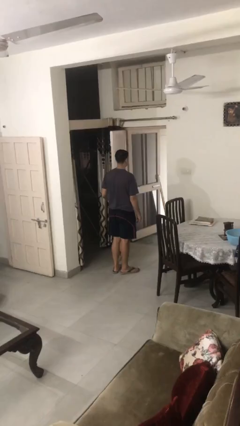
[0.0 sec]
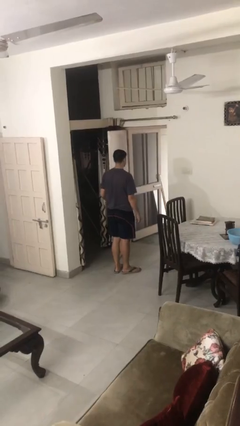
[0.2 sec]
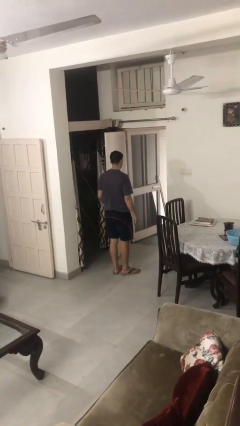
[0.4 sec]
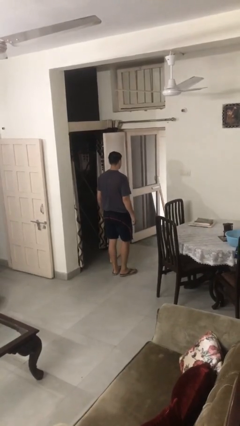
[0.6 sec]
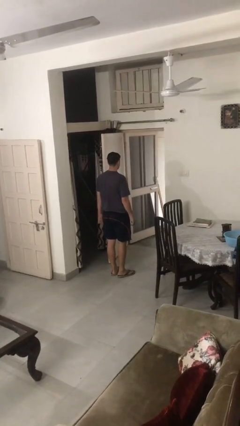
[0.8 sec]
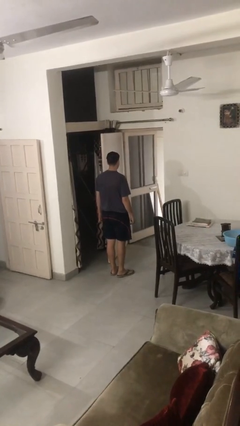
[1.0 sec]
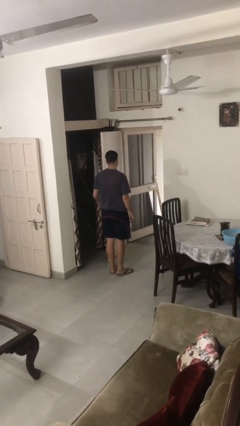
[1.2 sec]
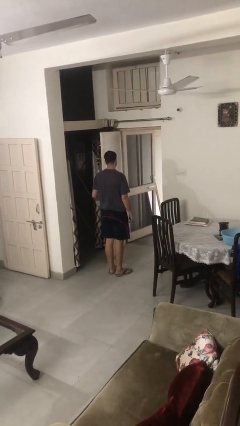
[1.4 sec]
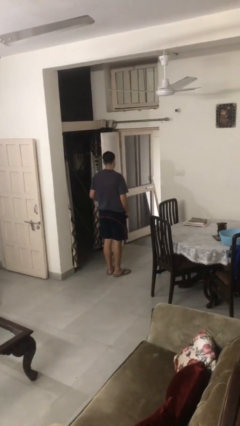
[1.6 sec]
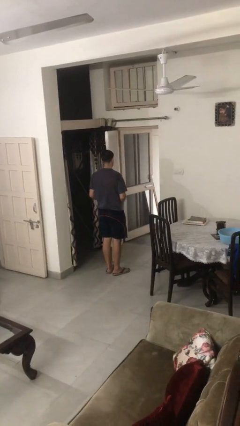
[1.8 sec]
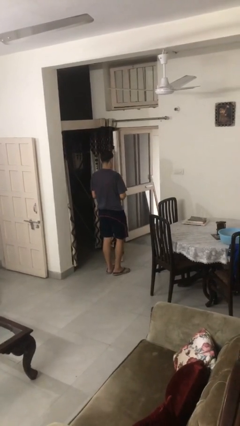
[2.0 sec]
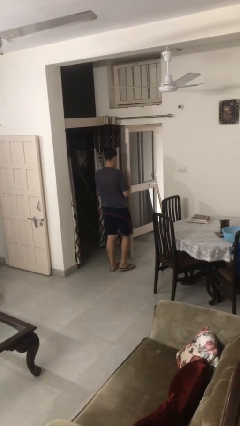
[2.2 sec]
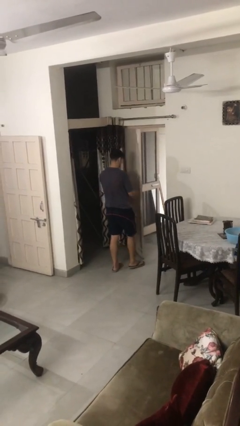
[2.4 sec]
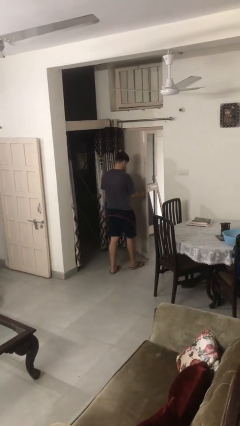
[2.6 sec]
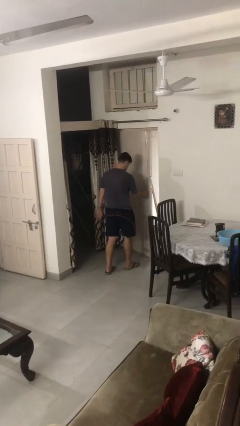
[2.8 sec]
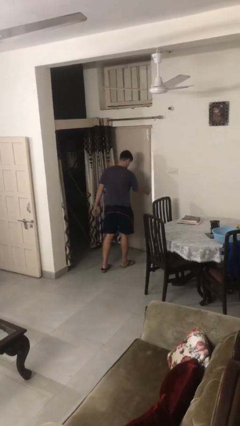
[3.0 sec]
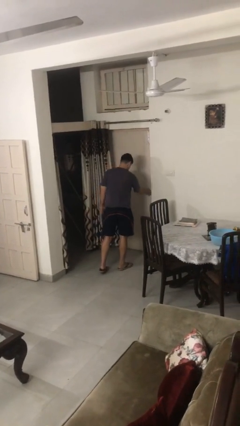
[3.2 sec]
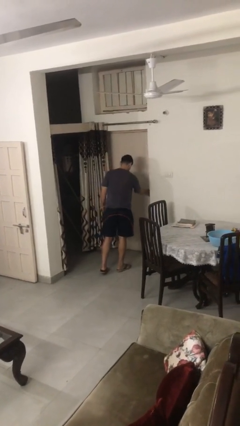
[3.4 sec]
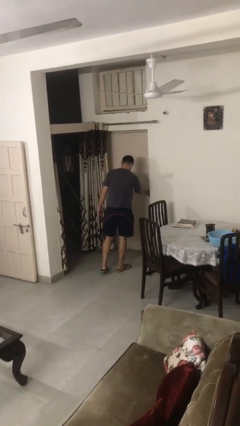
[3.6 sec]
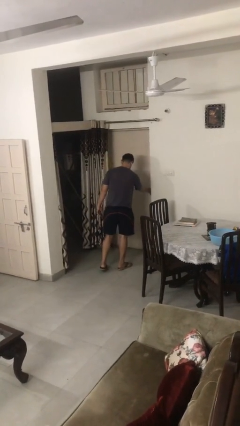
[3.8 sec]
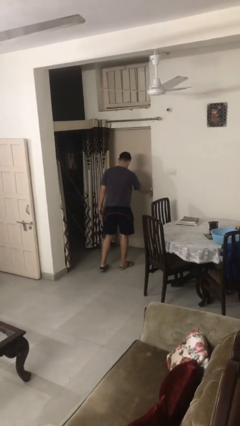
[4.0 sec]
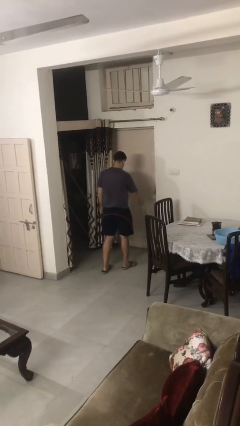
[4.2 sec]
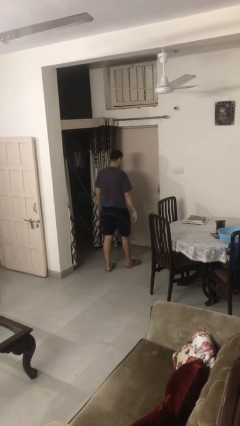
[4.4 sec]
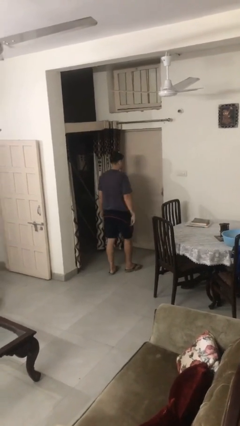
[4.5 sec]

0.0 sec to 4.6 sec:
person closes facility door

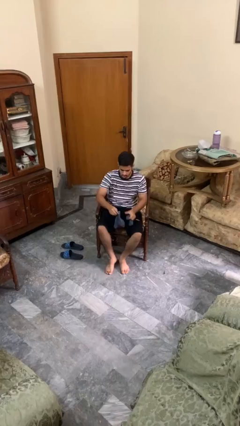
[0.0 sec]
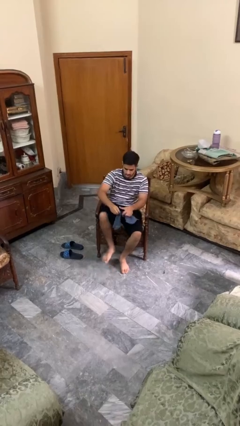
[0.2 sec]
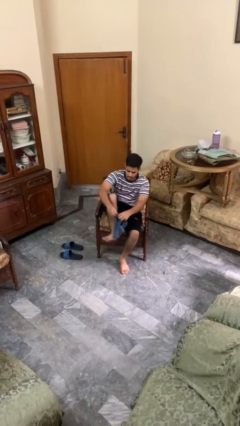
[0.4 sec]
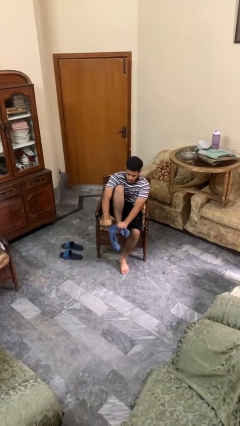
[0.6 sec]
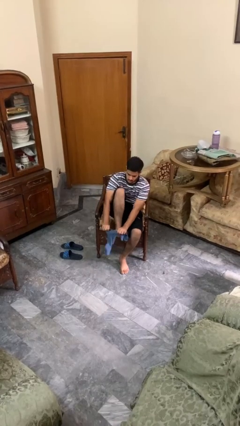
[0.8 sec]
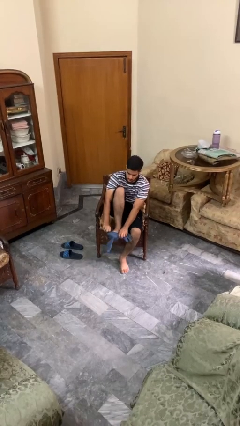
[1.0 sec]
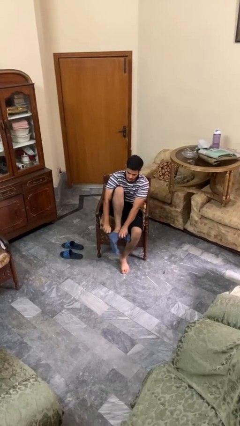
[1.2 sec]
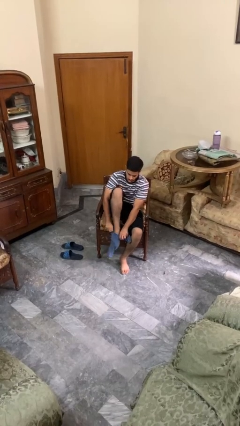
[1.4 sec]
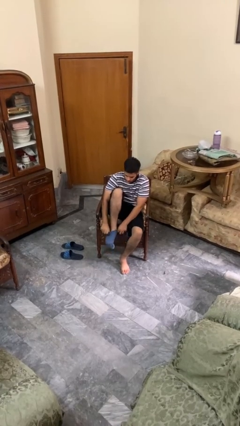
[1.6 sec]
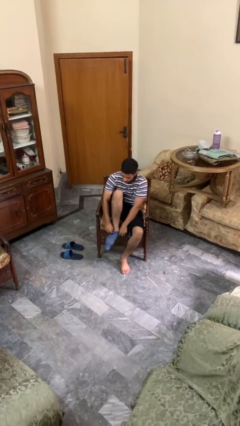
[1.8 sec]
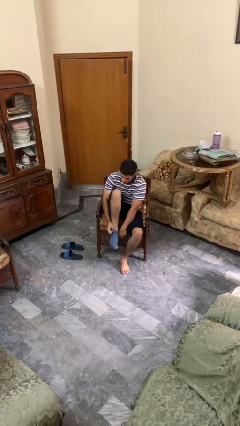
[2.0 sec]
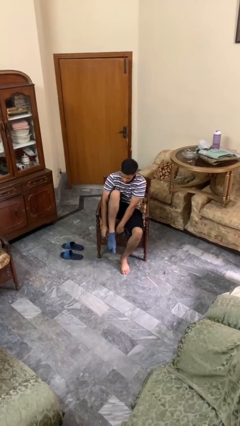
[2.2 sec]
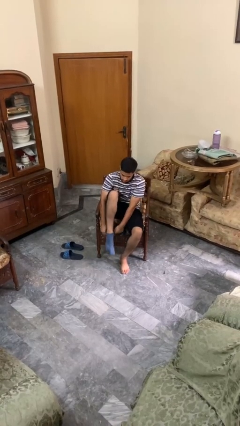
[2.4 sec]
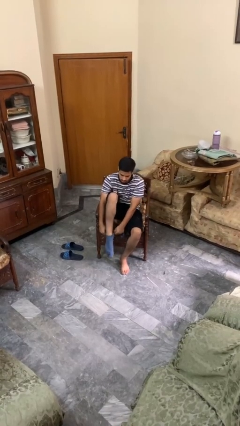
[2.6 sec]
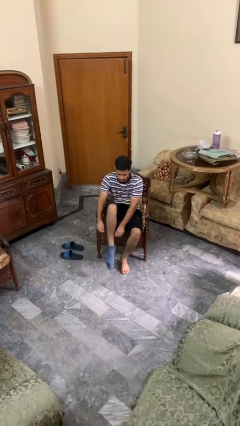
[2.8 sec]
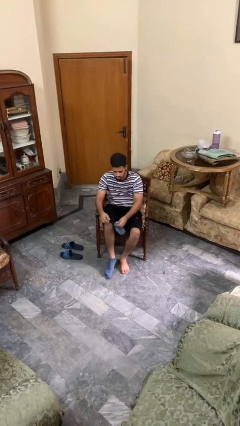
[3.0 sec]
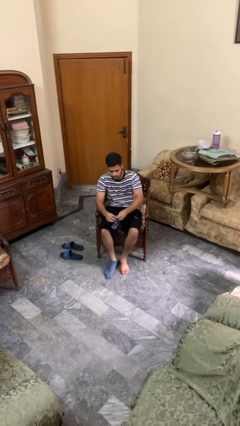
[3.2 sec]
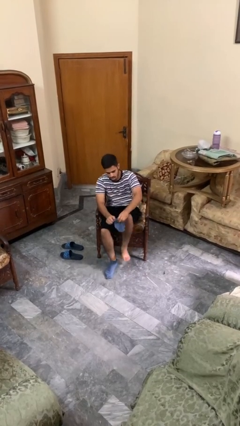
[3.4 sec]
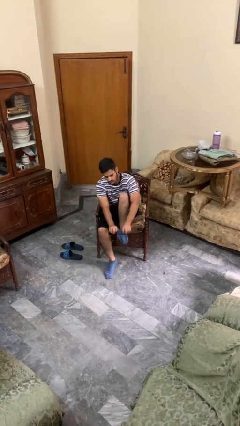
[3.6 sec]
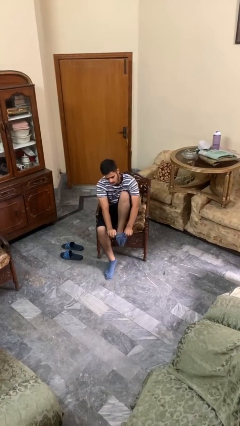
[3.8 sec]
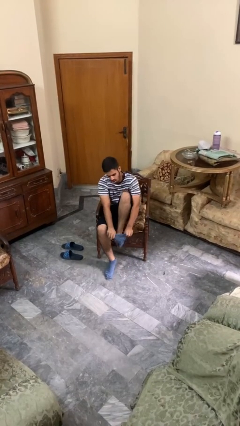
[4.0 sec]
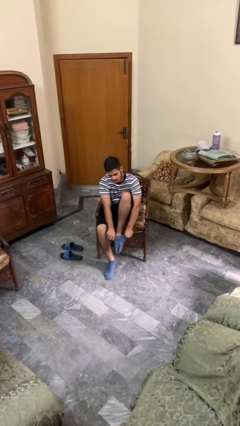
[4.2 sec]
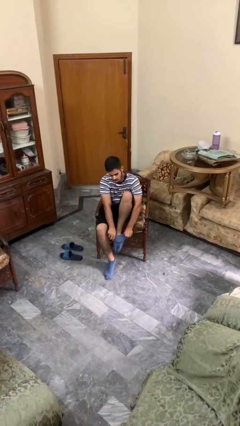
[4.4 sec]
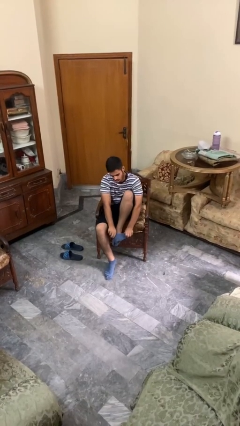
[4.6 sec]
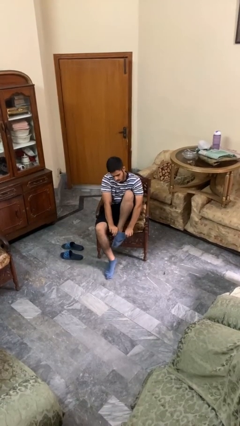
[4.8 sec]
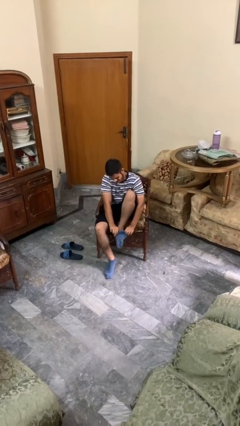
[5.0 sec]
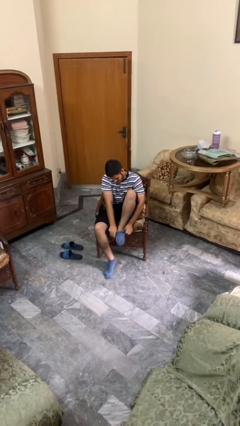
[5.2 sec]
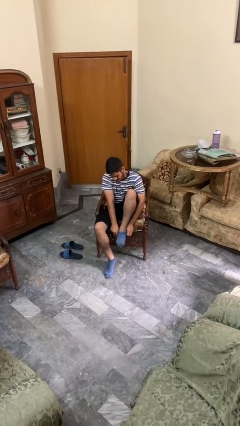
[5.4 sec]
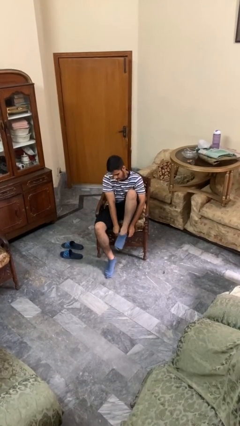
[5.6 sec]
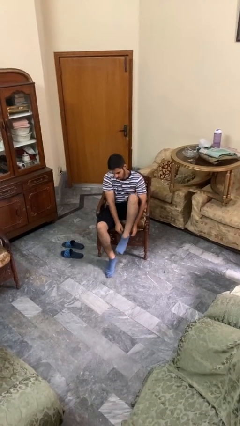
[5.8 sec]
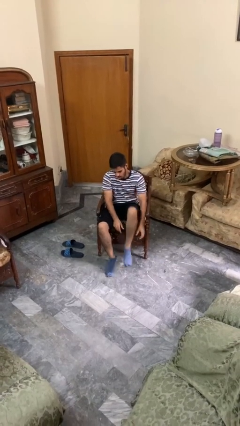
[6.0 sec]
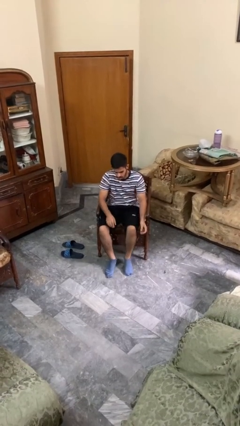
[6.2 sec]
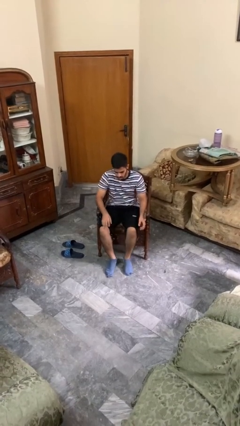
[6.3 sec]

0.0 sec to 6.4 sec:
person puts on socks

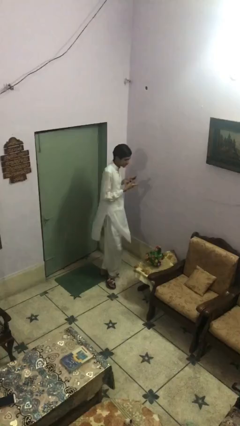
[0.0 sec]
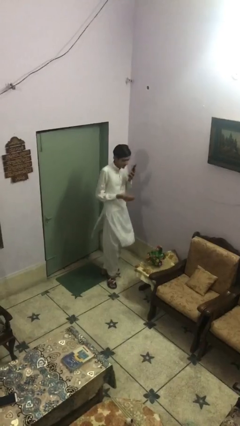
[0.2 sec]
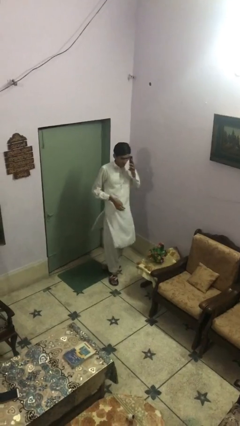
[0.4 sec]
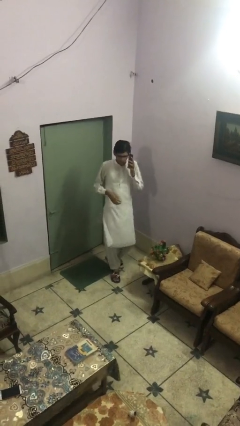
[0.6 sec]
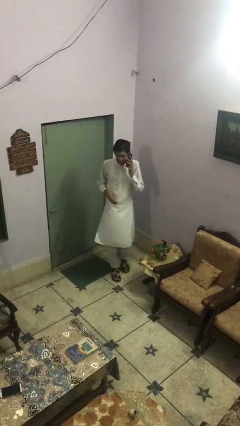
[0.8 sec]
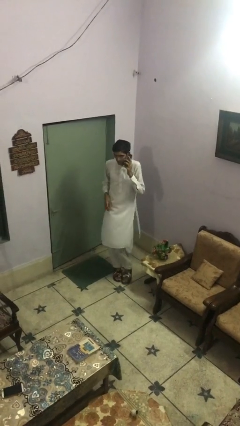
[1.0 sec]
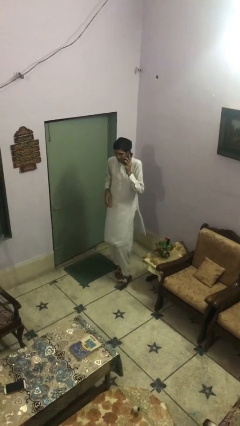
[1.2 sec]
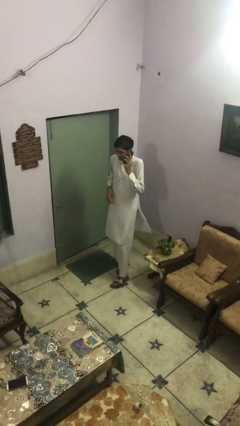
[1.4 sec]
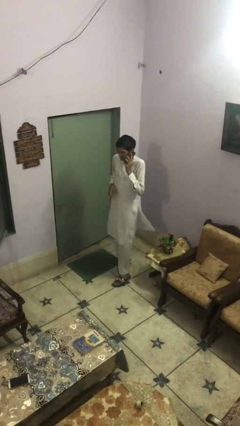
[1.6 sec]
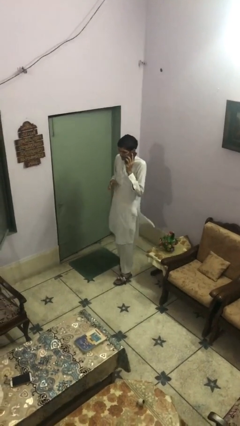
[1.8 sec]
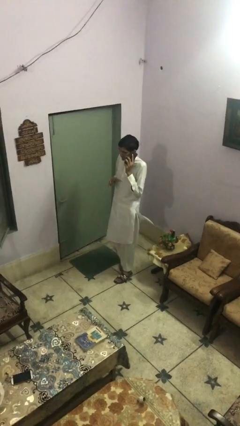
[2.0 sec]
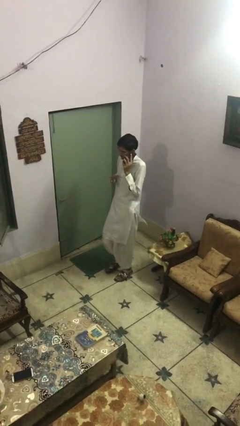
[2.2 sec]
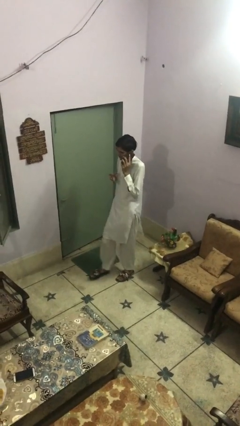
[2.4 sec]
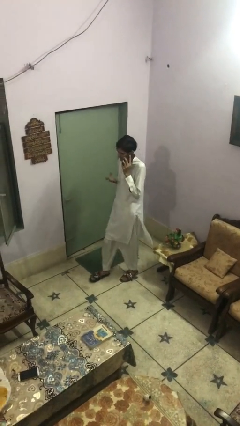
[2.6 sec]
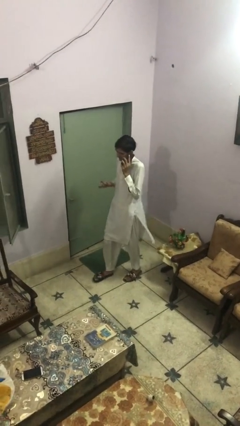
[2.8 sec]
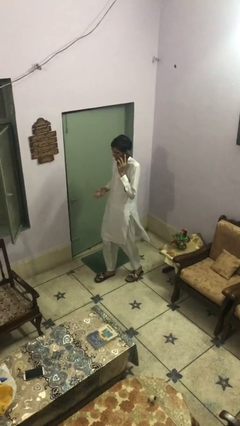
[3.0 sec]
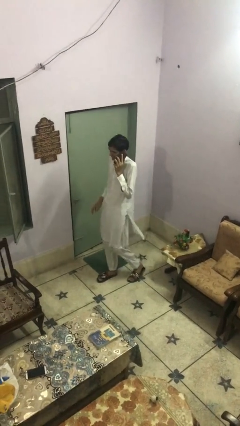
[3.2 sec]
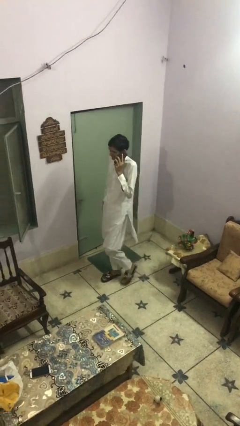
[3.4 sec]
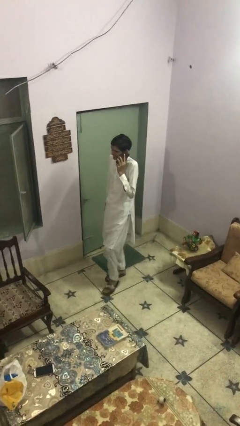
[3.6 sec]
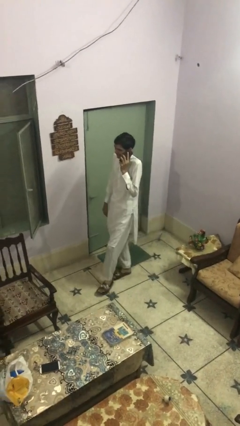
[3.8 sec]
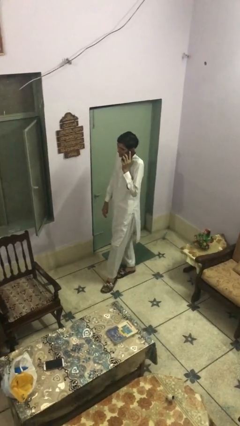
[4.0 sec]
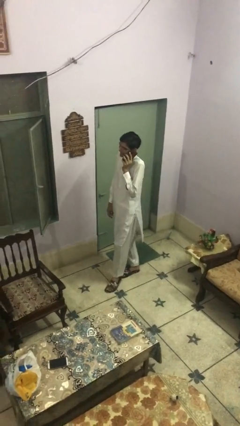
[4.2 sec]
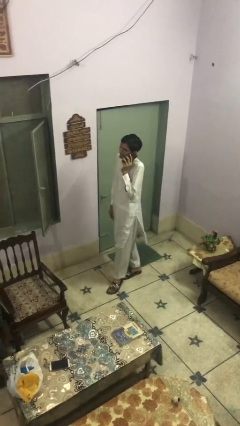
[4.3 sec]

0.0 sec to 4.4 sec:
person talks on phone

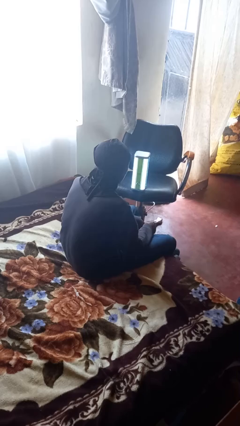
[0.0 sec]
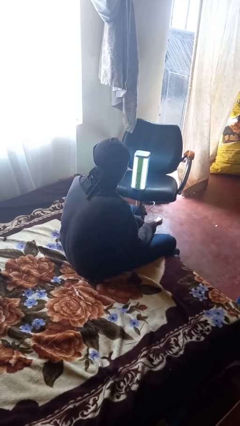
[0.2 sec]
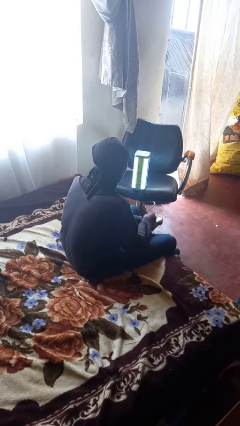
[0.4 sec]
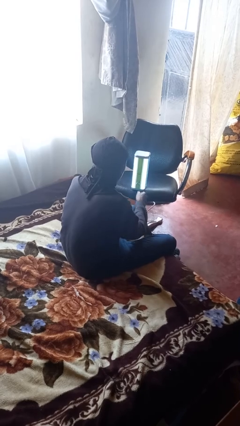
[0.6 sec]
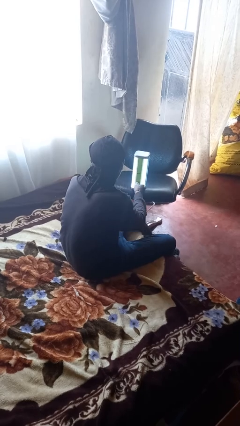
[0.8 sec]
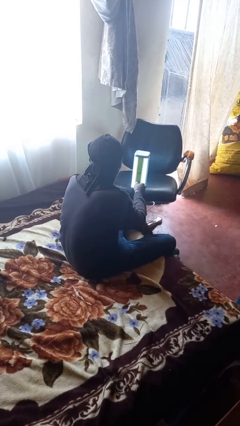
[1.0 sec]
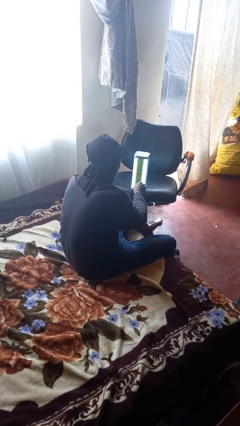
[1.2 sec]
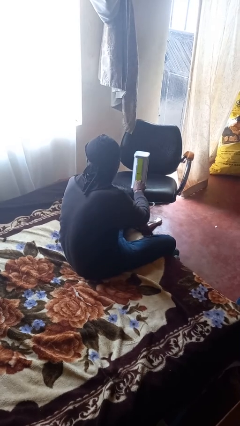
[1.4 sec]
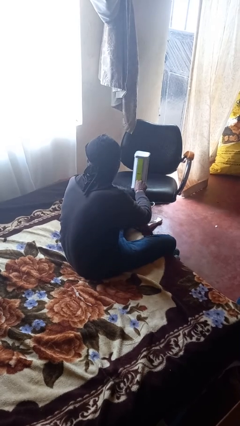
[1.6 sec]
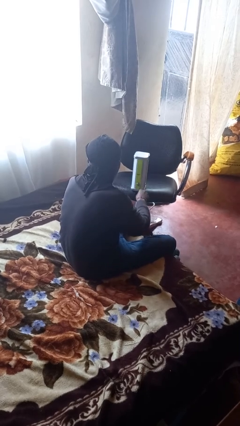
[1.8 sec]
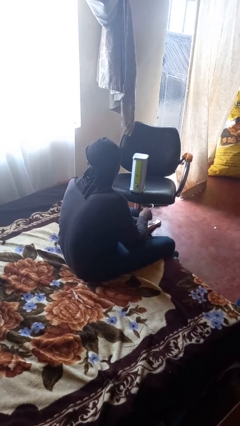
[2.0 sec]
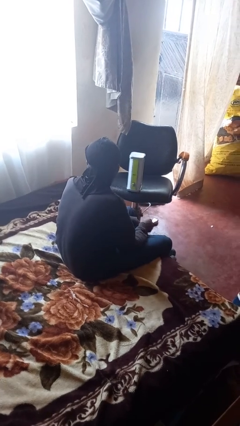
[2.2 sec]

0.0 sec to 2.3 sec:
person turns off lamp
